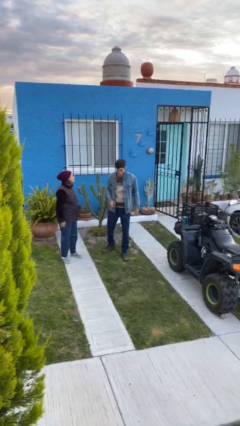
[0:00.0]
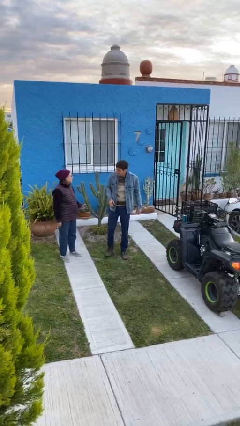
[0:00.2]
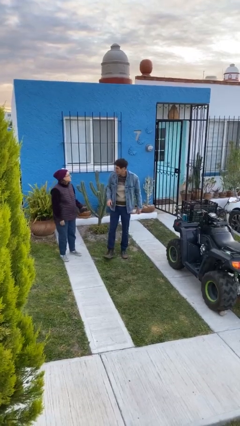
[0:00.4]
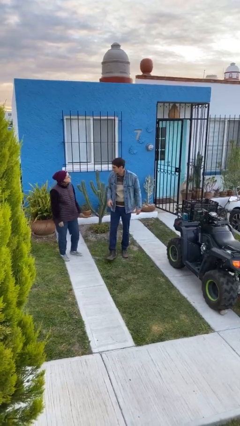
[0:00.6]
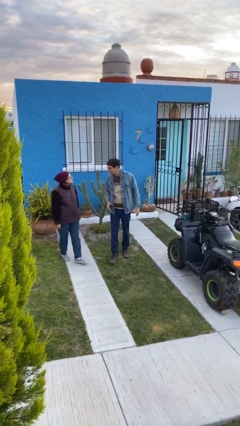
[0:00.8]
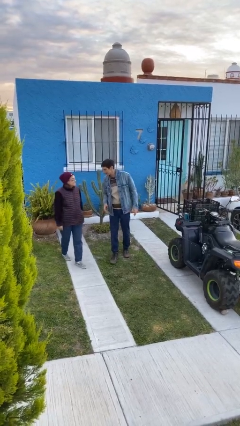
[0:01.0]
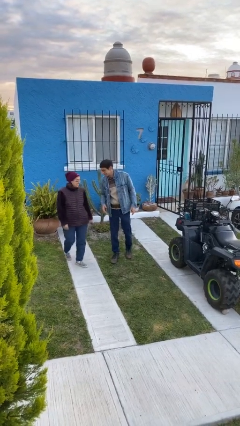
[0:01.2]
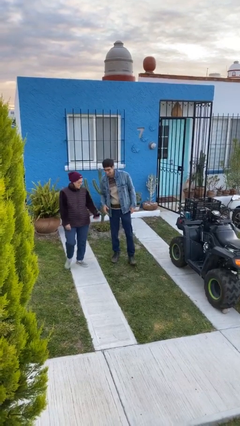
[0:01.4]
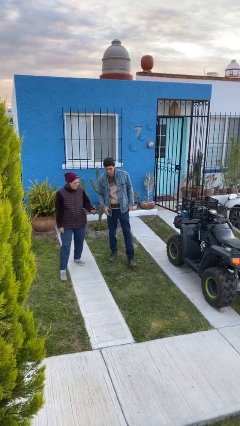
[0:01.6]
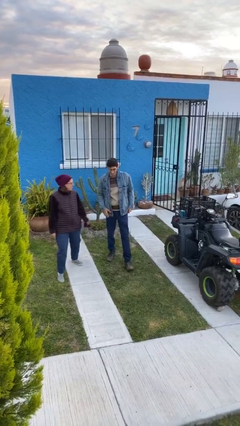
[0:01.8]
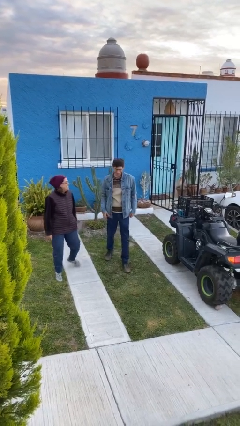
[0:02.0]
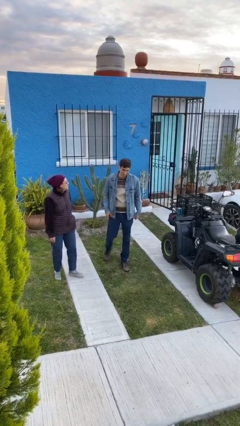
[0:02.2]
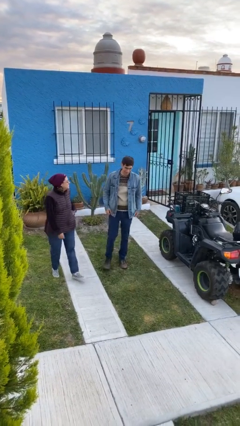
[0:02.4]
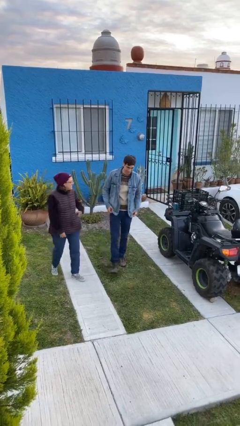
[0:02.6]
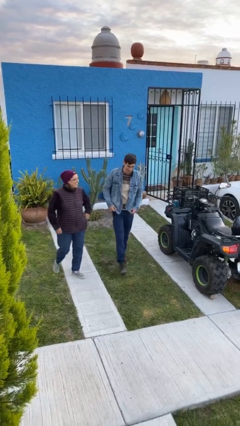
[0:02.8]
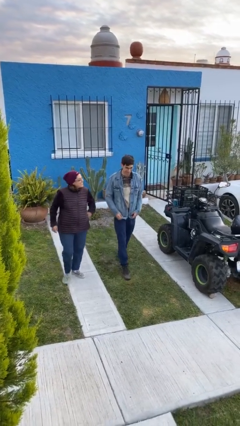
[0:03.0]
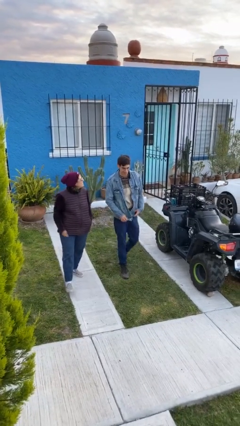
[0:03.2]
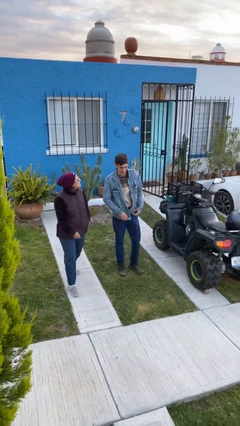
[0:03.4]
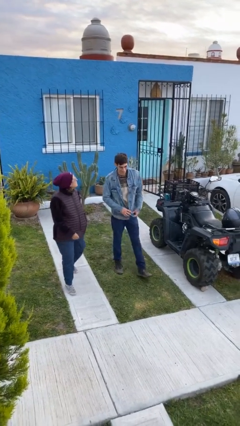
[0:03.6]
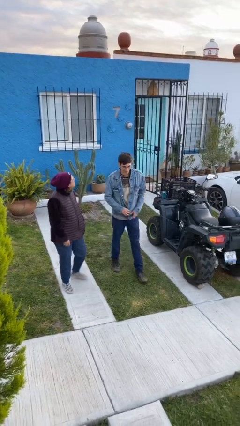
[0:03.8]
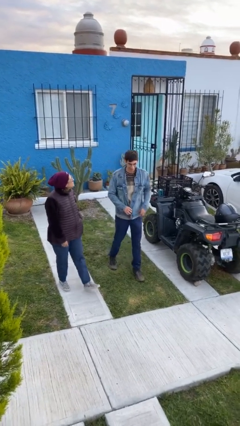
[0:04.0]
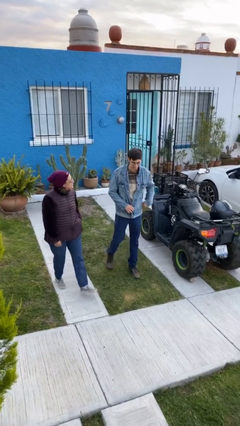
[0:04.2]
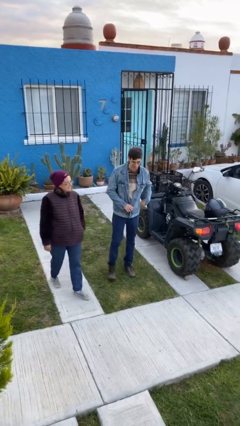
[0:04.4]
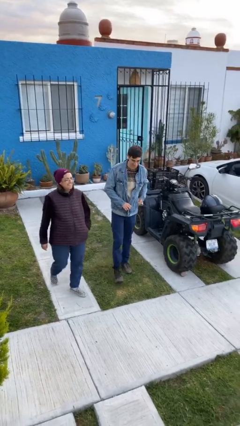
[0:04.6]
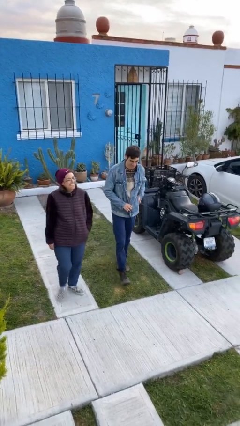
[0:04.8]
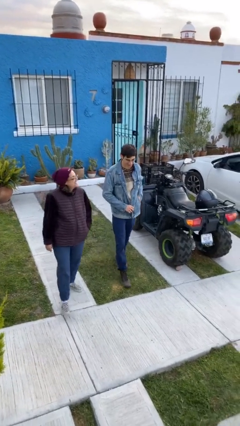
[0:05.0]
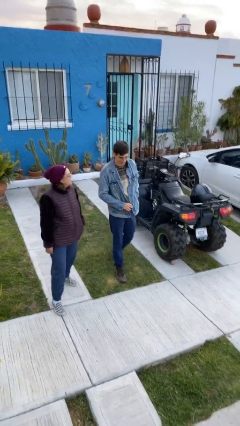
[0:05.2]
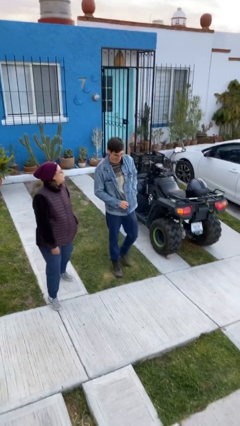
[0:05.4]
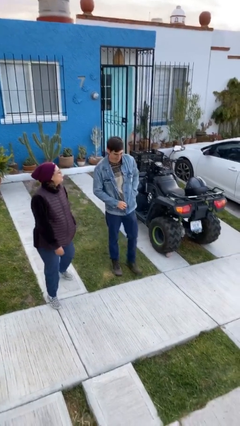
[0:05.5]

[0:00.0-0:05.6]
person talks to person

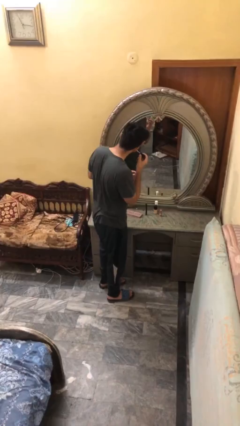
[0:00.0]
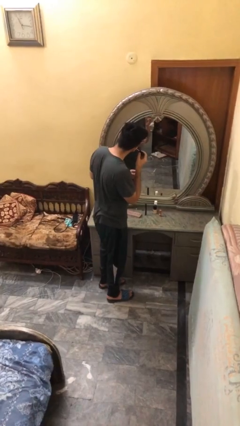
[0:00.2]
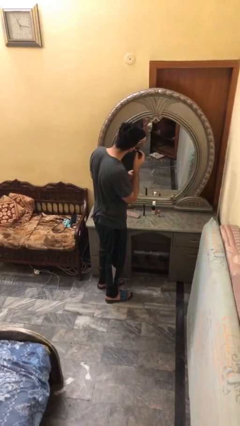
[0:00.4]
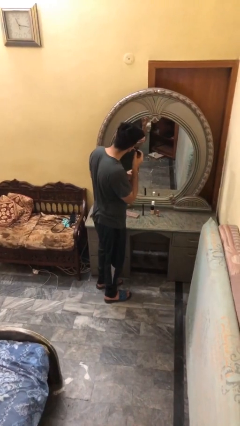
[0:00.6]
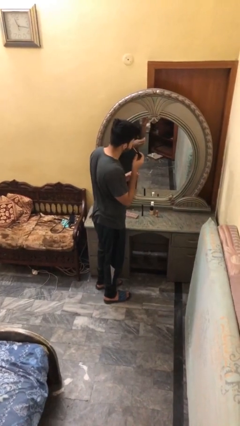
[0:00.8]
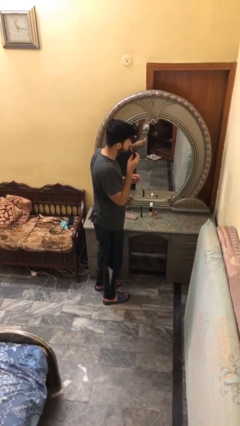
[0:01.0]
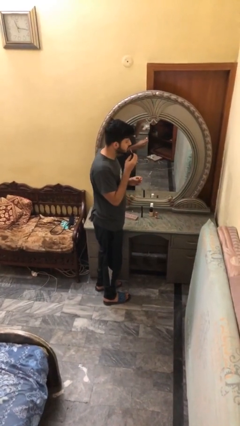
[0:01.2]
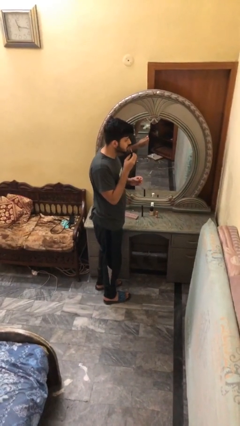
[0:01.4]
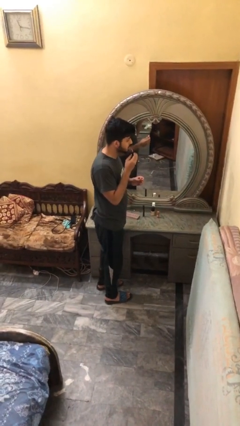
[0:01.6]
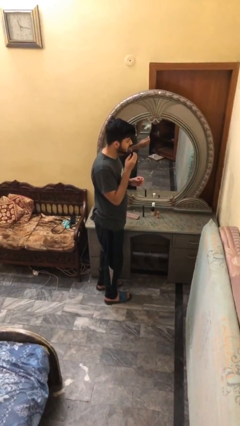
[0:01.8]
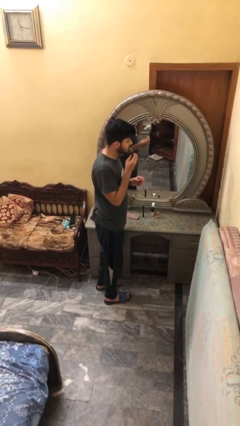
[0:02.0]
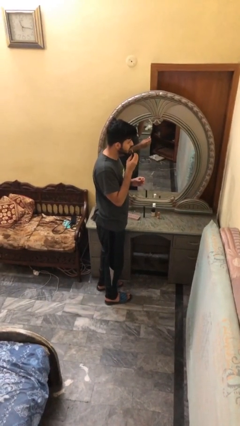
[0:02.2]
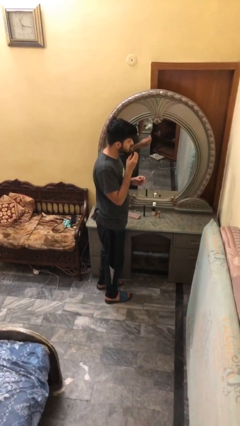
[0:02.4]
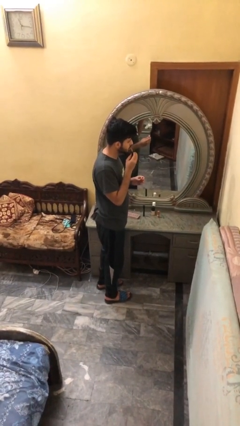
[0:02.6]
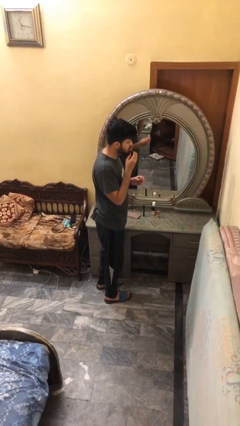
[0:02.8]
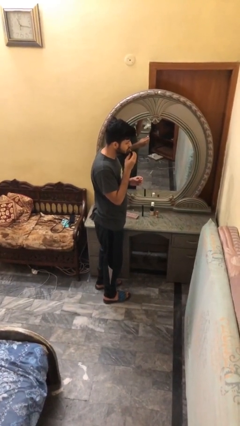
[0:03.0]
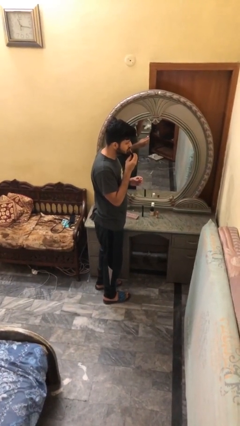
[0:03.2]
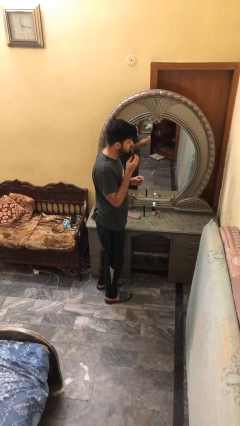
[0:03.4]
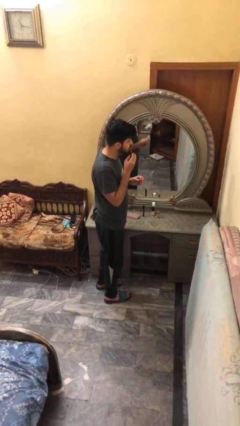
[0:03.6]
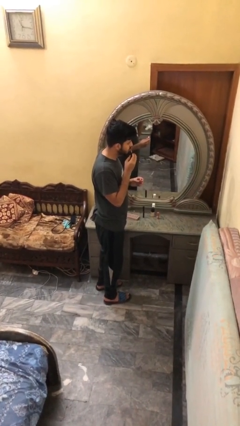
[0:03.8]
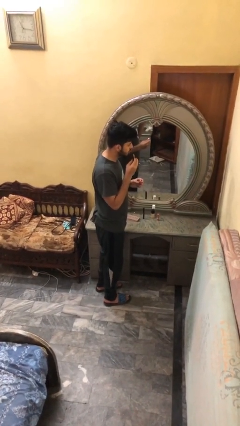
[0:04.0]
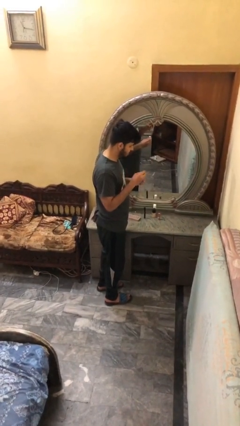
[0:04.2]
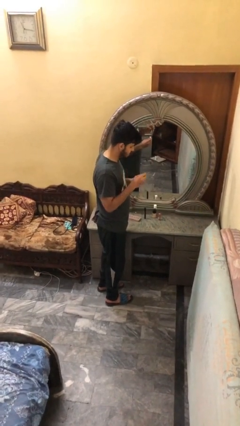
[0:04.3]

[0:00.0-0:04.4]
person applies lip makeup

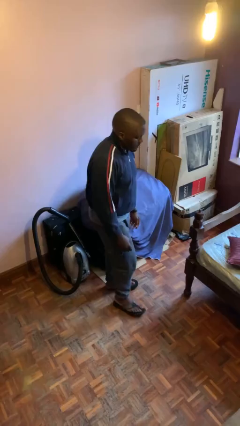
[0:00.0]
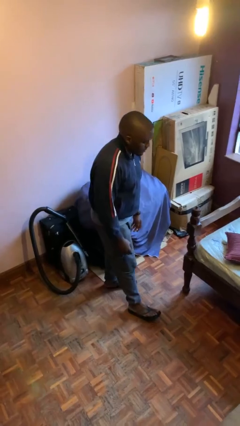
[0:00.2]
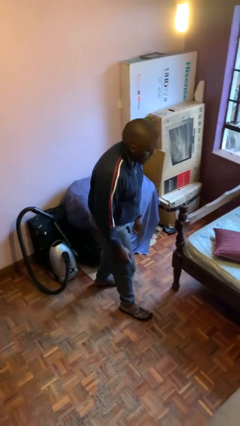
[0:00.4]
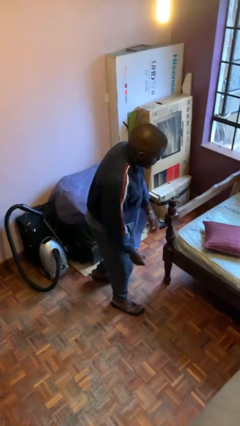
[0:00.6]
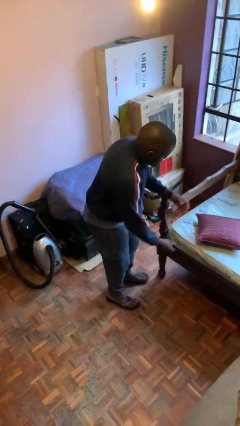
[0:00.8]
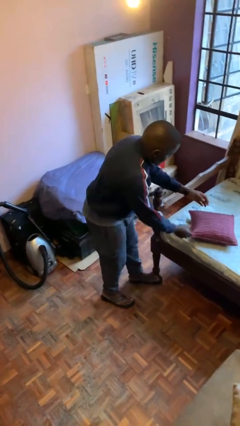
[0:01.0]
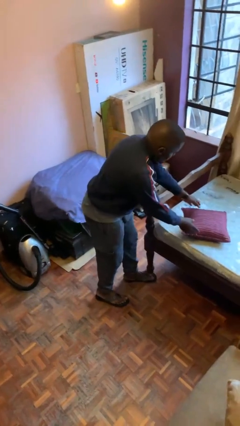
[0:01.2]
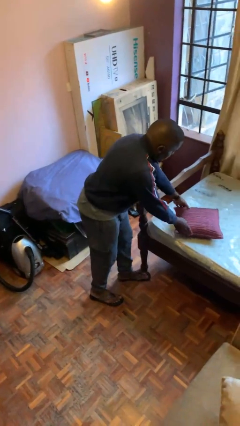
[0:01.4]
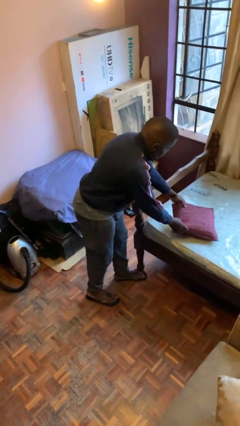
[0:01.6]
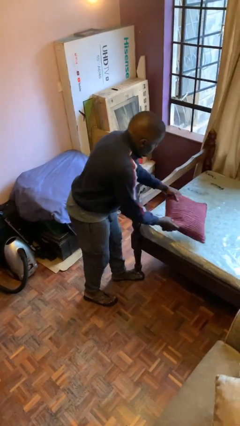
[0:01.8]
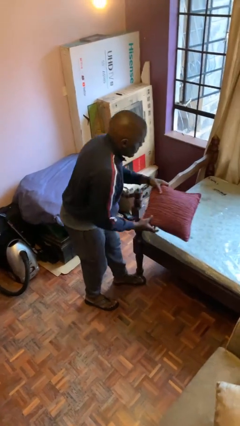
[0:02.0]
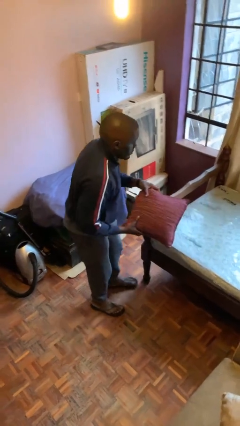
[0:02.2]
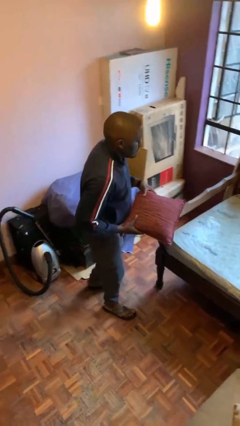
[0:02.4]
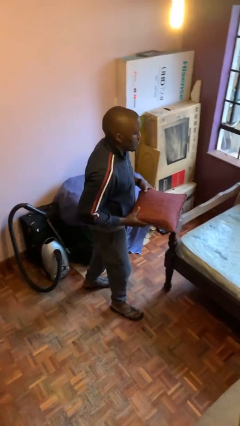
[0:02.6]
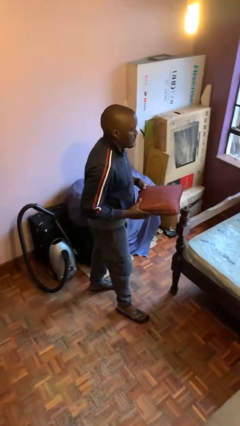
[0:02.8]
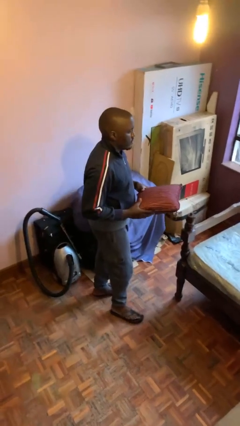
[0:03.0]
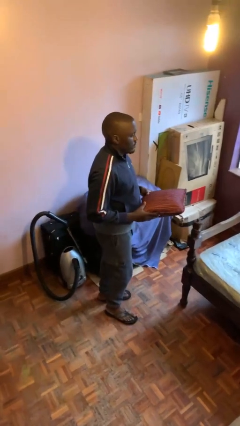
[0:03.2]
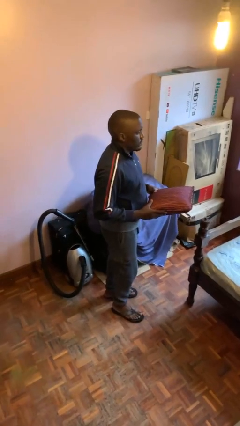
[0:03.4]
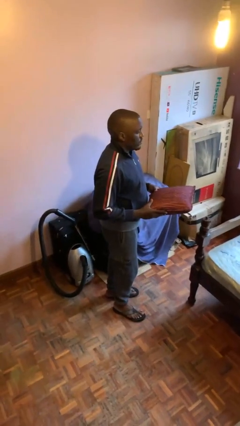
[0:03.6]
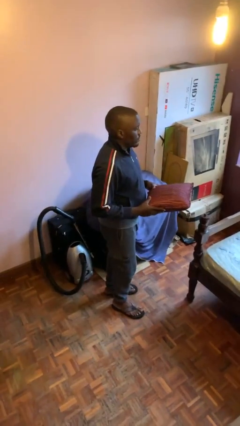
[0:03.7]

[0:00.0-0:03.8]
person picks up object from bed

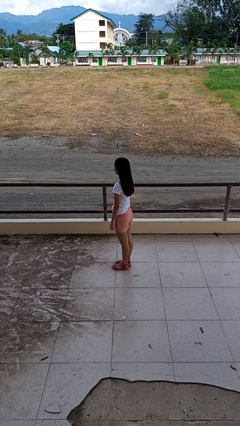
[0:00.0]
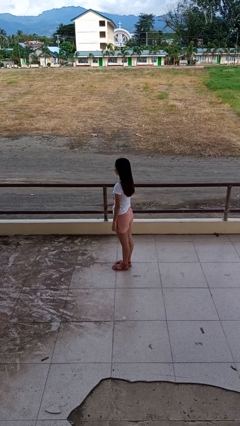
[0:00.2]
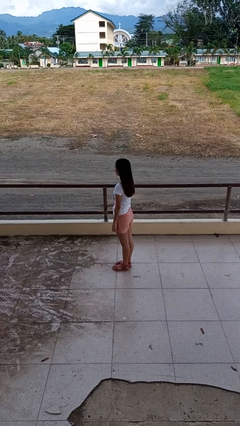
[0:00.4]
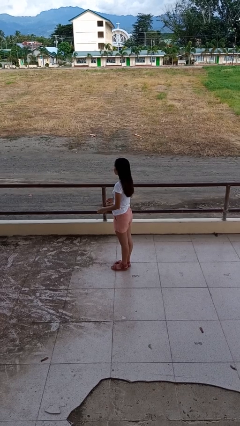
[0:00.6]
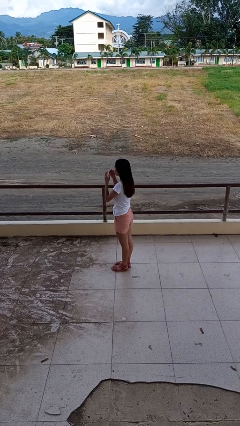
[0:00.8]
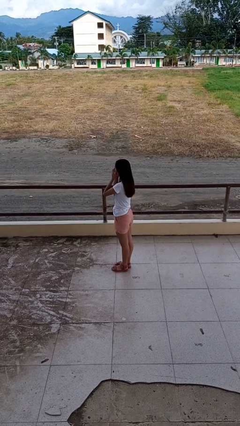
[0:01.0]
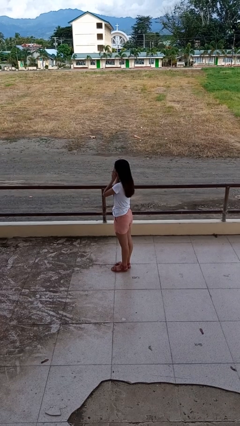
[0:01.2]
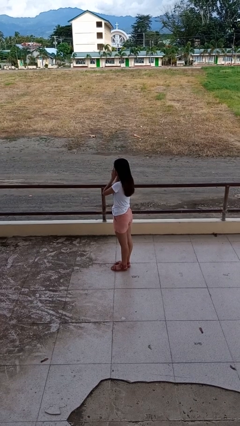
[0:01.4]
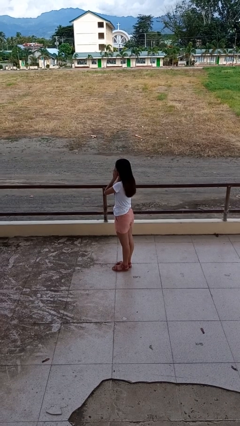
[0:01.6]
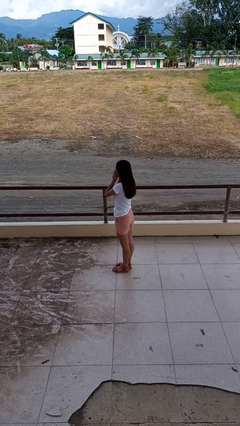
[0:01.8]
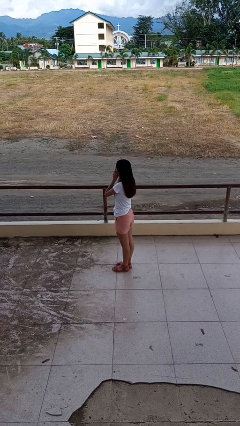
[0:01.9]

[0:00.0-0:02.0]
person rubs eyes

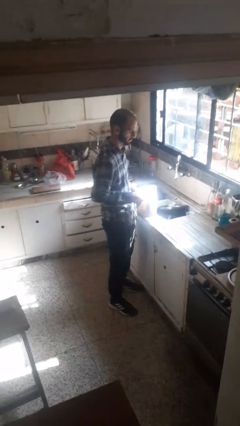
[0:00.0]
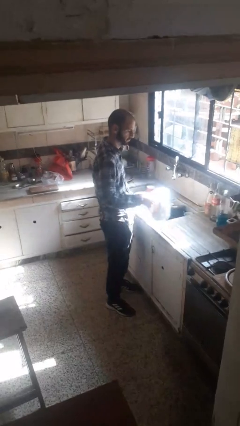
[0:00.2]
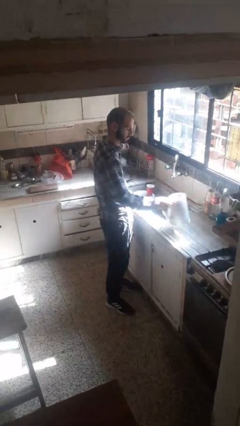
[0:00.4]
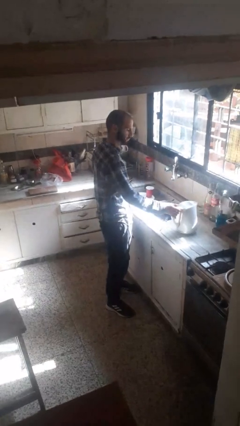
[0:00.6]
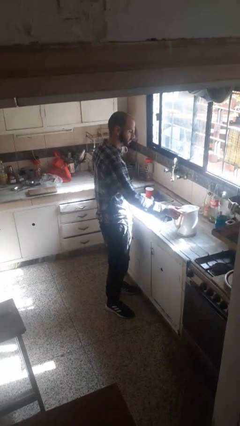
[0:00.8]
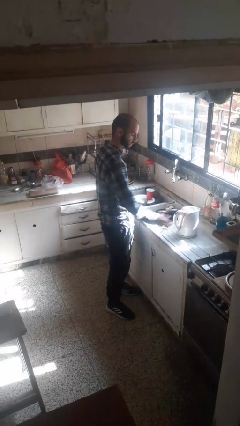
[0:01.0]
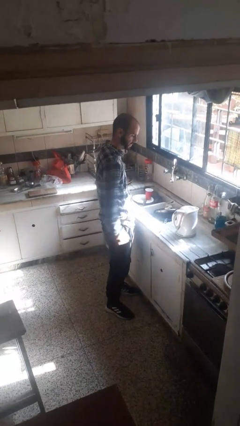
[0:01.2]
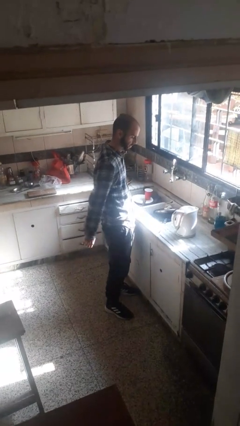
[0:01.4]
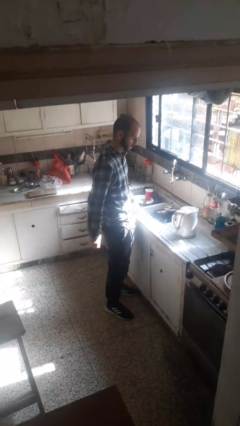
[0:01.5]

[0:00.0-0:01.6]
person puts down object on countertop

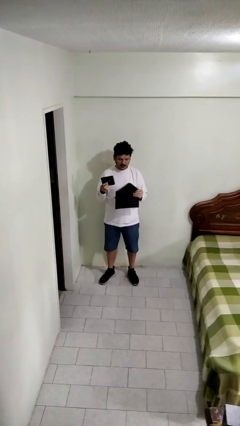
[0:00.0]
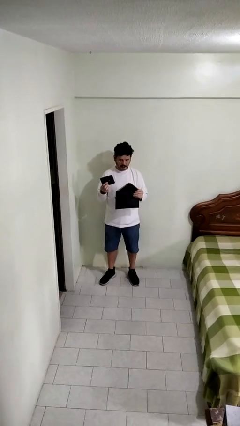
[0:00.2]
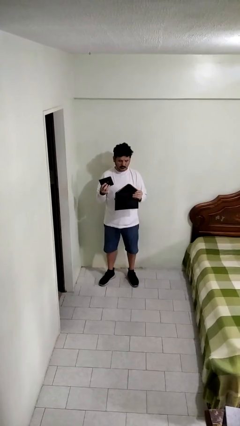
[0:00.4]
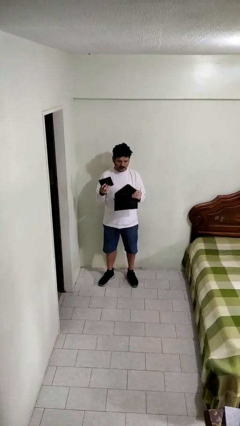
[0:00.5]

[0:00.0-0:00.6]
person takes object from purse
